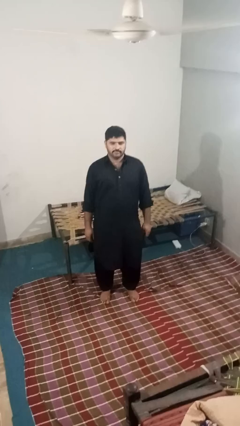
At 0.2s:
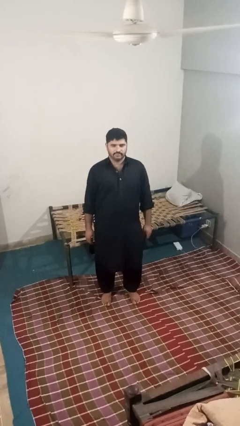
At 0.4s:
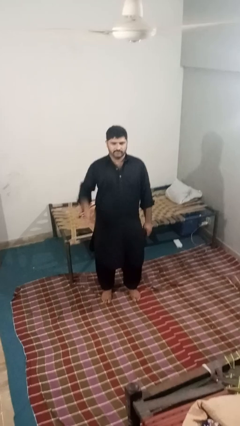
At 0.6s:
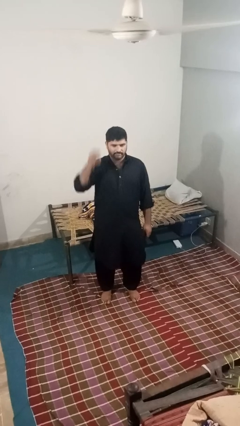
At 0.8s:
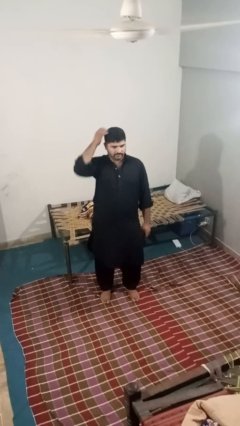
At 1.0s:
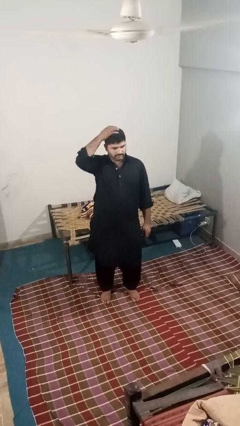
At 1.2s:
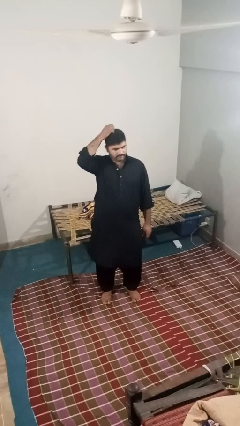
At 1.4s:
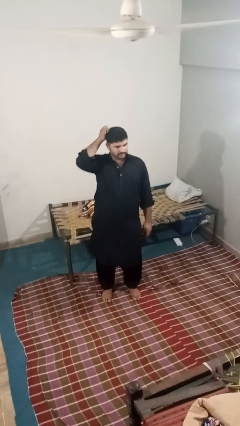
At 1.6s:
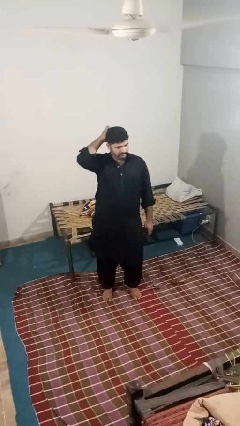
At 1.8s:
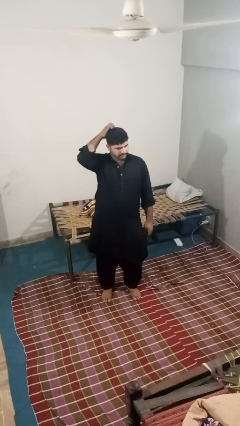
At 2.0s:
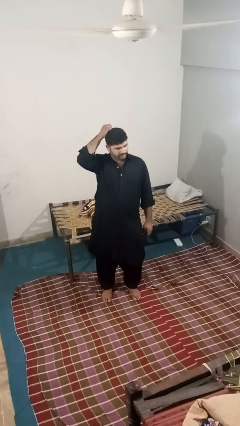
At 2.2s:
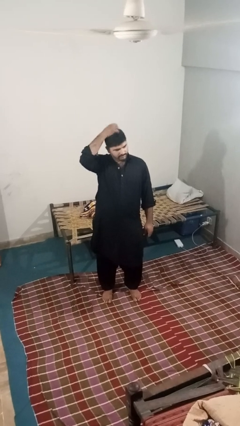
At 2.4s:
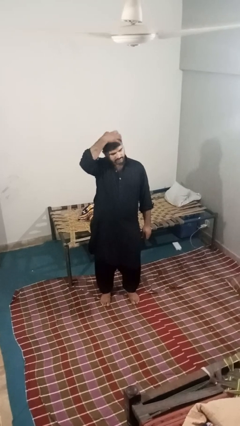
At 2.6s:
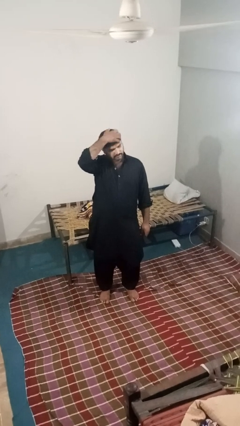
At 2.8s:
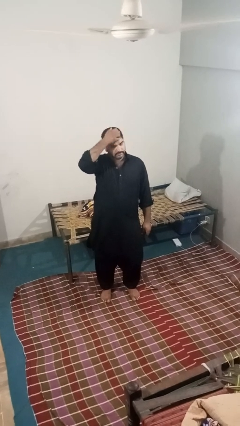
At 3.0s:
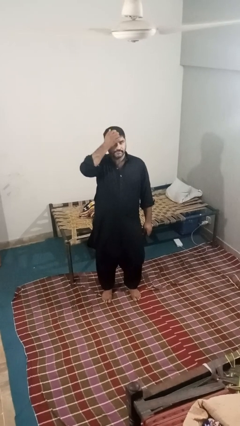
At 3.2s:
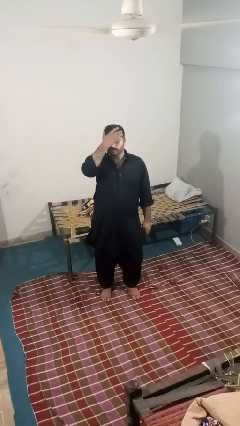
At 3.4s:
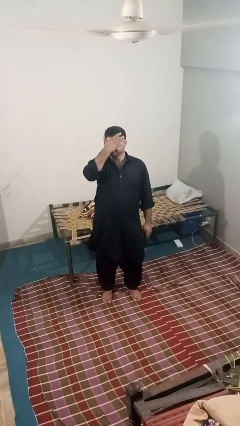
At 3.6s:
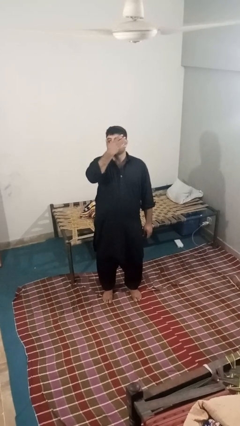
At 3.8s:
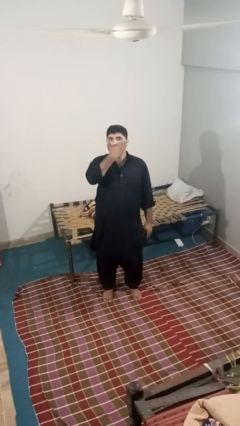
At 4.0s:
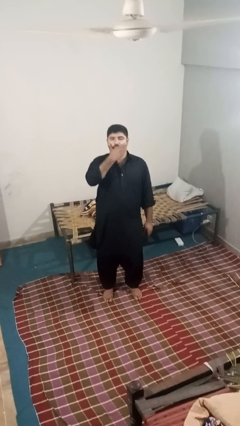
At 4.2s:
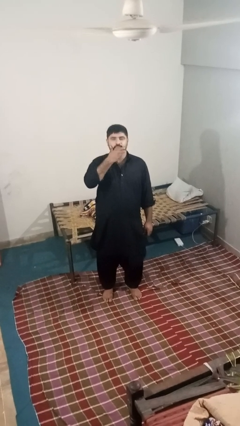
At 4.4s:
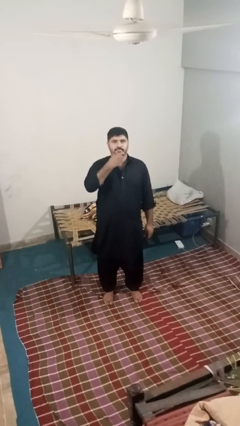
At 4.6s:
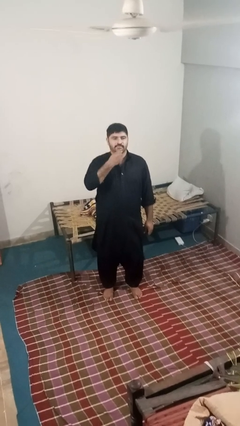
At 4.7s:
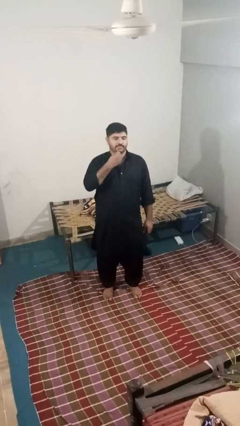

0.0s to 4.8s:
person scratches face

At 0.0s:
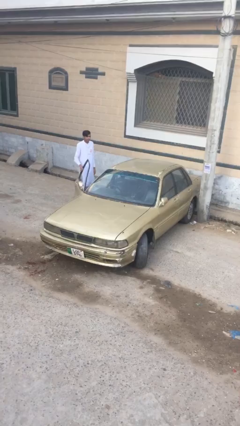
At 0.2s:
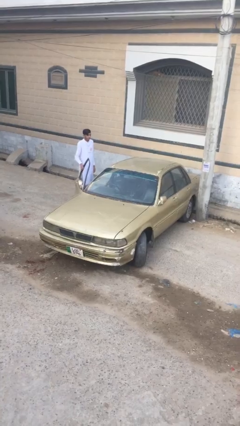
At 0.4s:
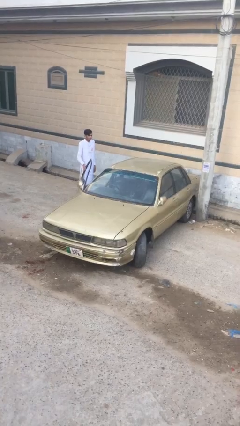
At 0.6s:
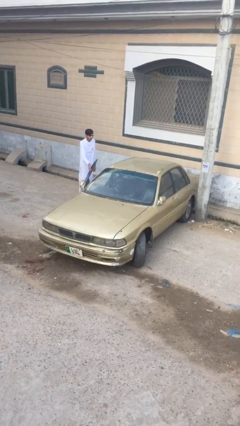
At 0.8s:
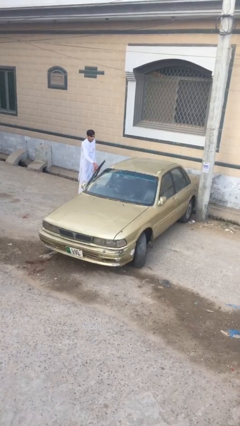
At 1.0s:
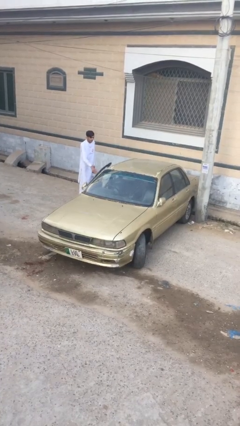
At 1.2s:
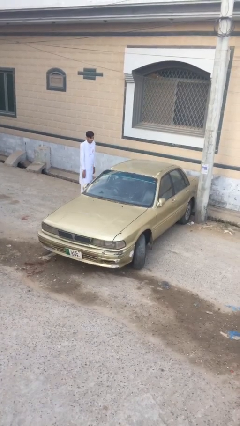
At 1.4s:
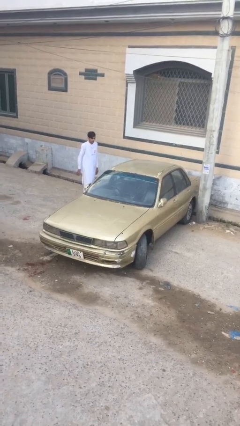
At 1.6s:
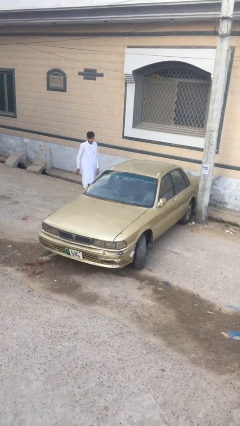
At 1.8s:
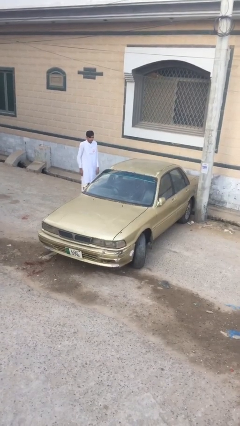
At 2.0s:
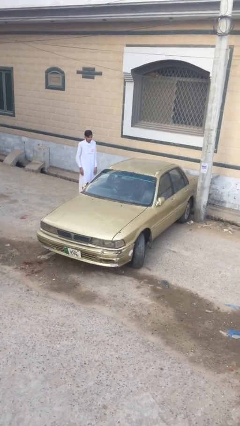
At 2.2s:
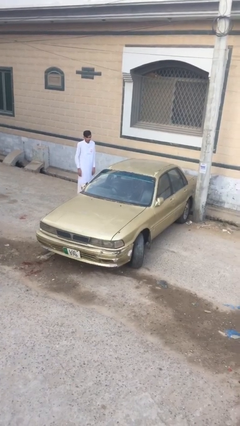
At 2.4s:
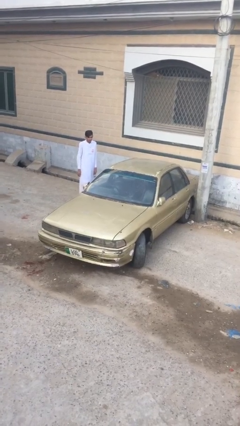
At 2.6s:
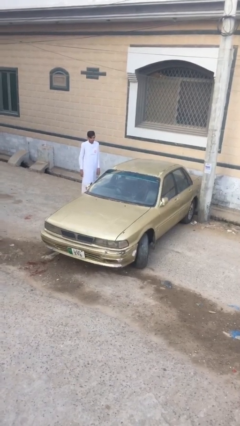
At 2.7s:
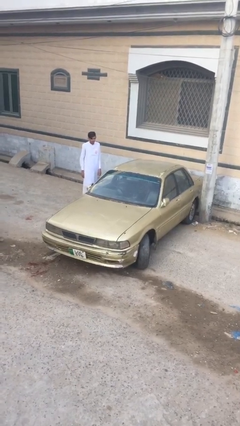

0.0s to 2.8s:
person closes car door

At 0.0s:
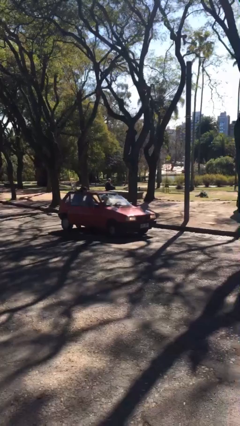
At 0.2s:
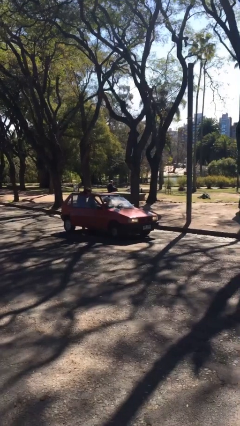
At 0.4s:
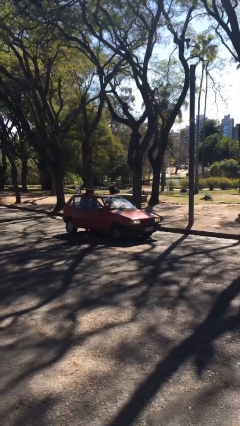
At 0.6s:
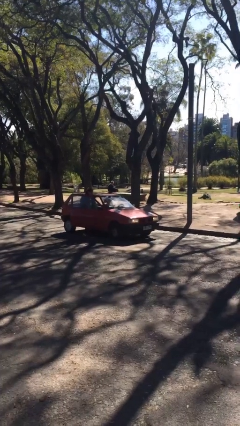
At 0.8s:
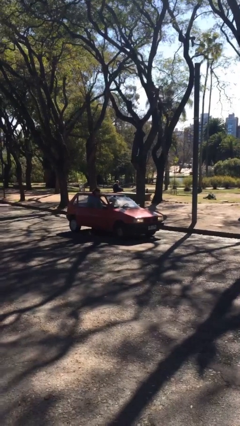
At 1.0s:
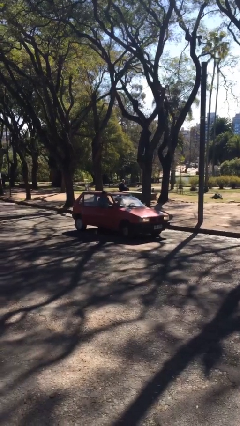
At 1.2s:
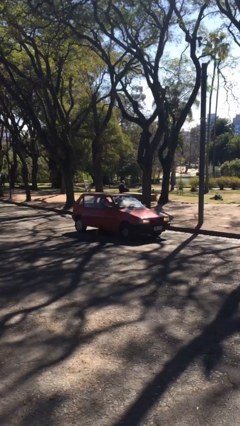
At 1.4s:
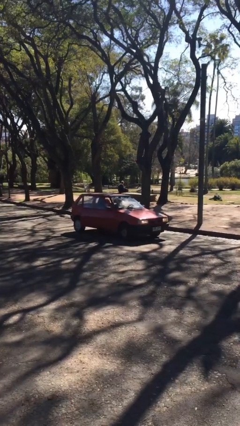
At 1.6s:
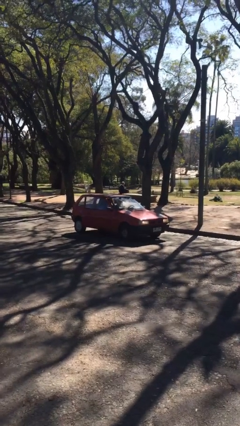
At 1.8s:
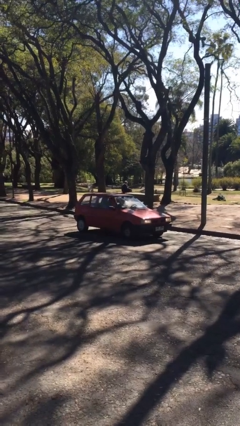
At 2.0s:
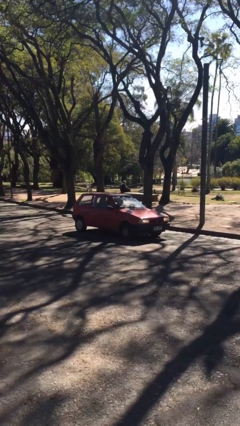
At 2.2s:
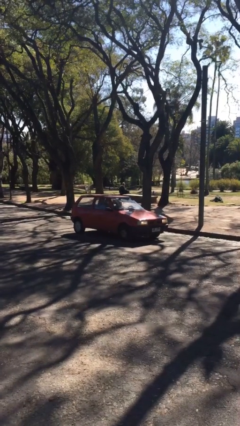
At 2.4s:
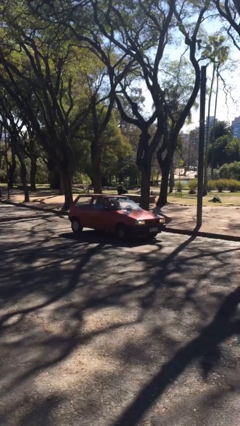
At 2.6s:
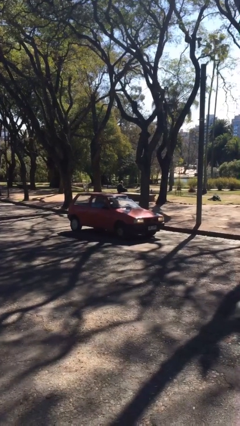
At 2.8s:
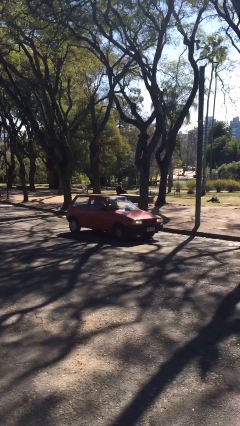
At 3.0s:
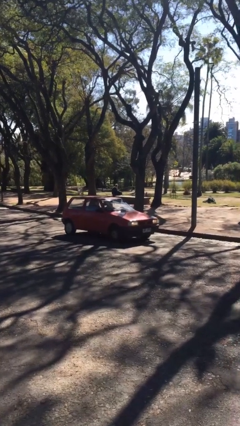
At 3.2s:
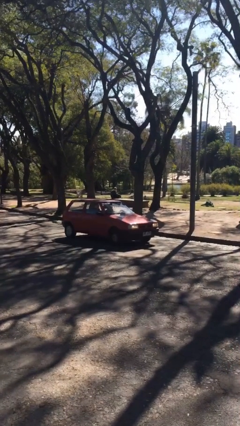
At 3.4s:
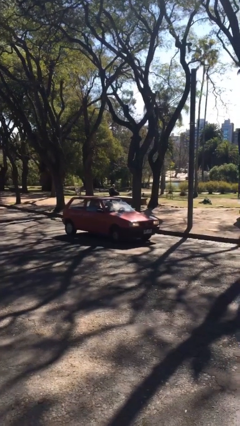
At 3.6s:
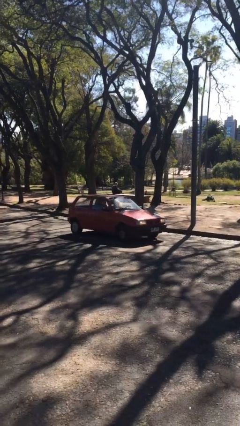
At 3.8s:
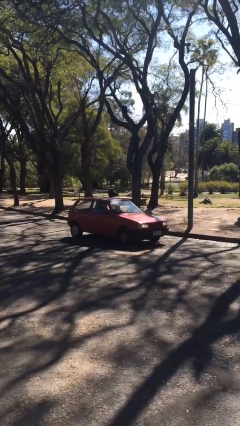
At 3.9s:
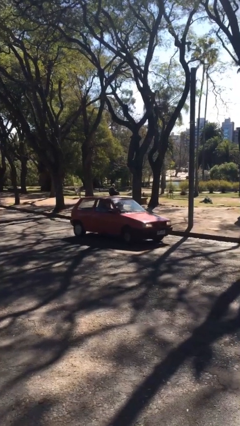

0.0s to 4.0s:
car picks up person

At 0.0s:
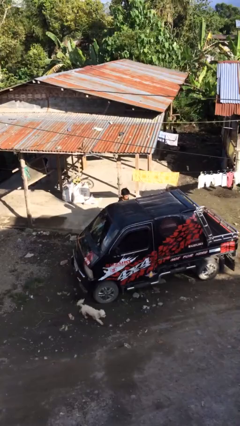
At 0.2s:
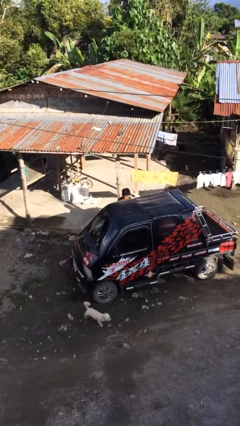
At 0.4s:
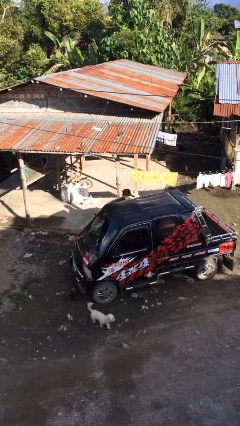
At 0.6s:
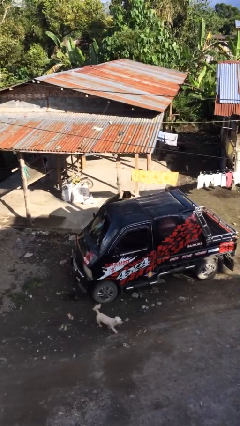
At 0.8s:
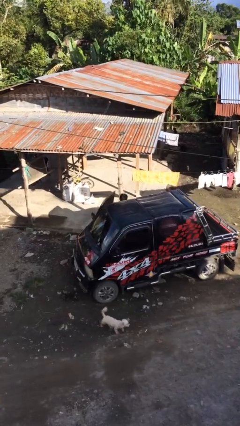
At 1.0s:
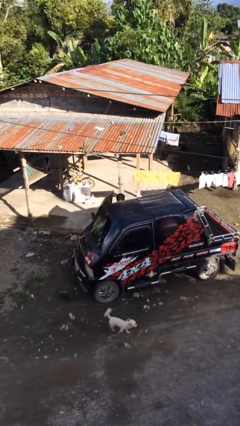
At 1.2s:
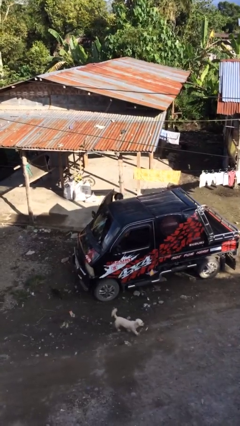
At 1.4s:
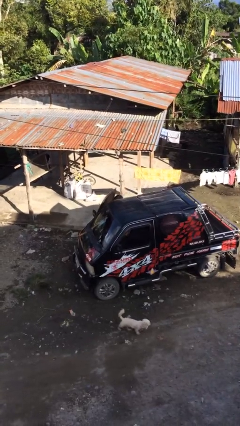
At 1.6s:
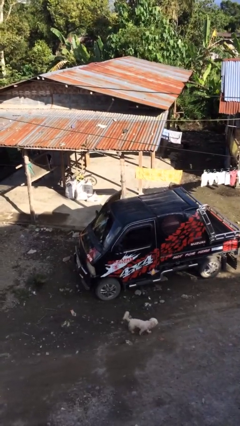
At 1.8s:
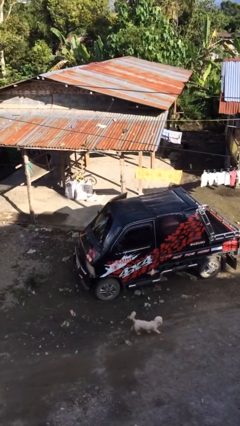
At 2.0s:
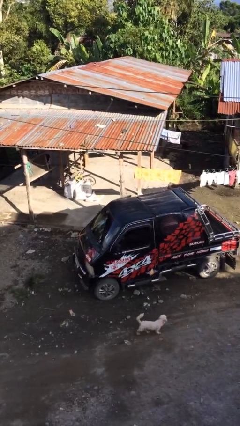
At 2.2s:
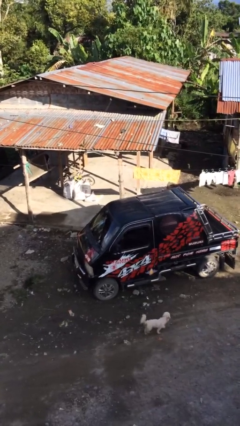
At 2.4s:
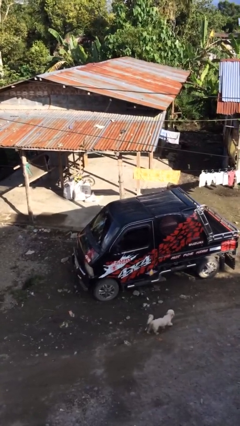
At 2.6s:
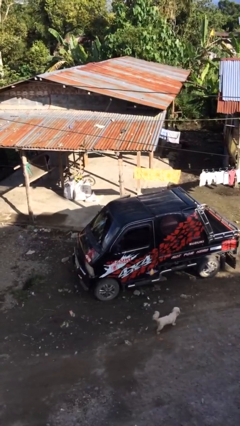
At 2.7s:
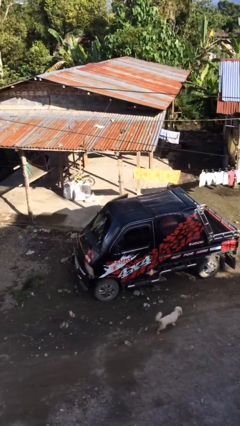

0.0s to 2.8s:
person enters car

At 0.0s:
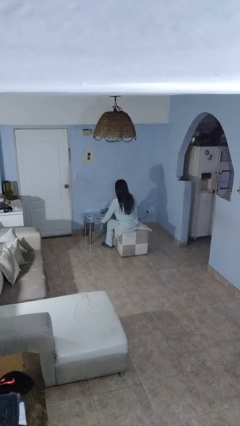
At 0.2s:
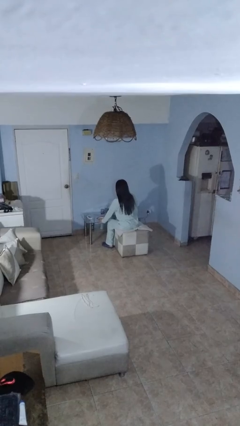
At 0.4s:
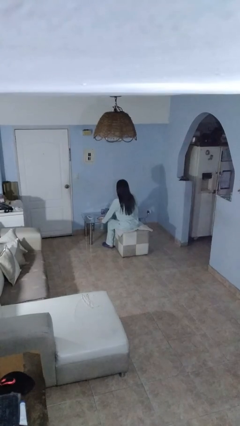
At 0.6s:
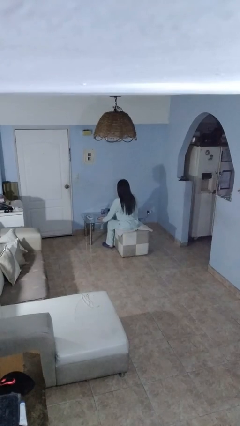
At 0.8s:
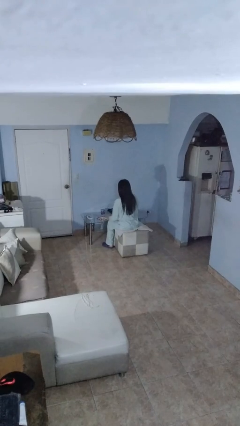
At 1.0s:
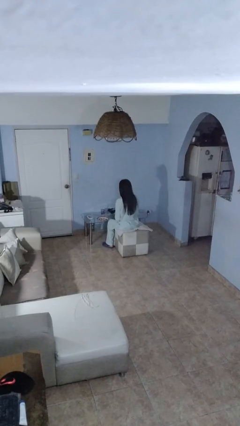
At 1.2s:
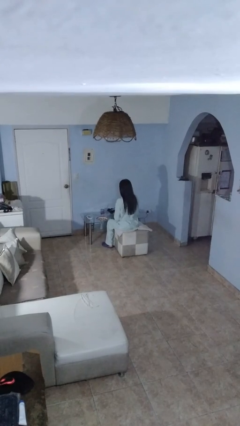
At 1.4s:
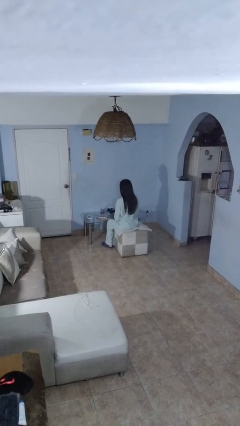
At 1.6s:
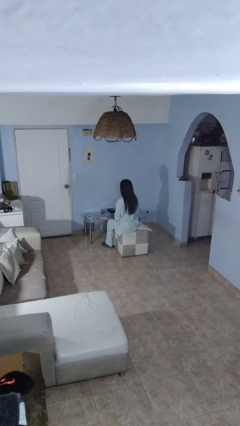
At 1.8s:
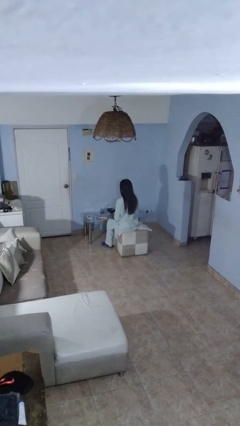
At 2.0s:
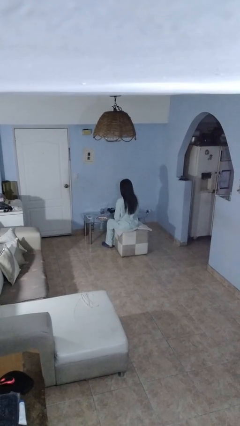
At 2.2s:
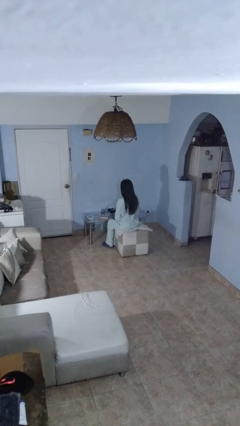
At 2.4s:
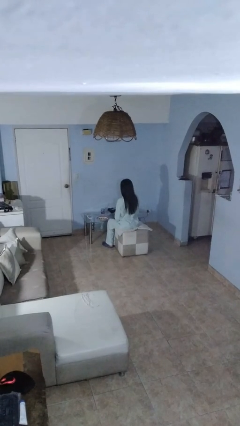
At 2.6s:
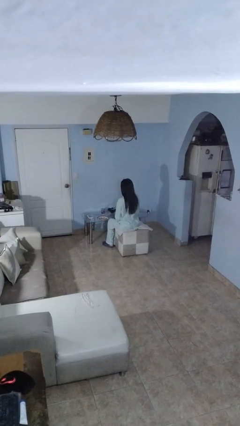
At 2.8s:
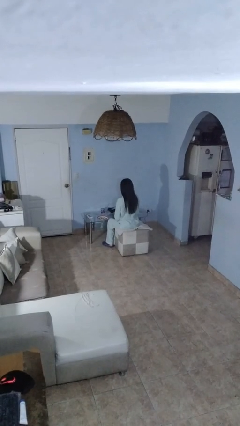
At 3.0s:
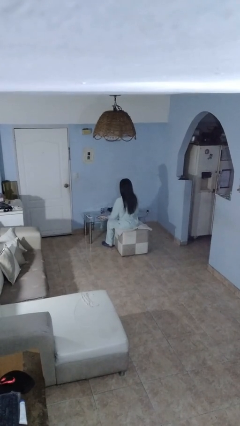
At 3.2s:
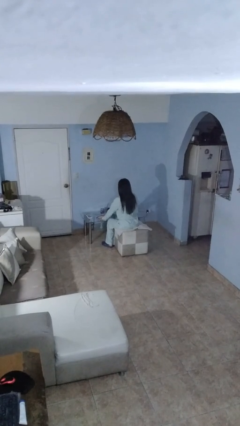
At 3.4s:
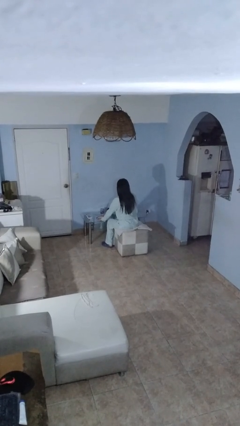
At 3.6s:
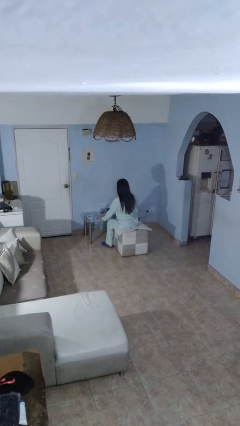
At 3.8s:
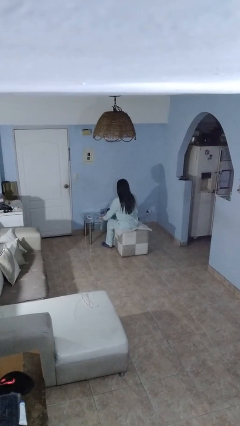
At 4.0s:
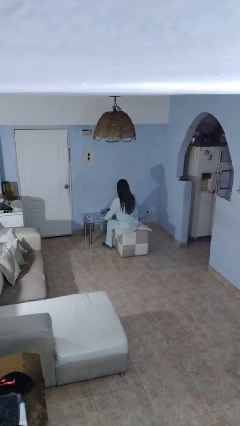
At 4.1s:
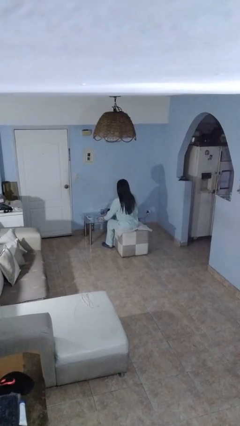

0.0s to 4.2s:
person turns on lamp
